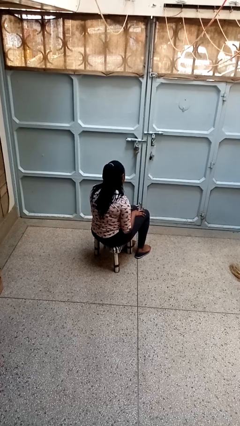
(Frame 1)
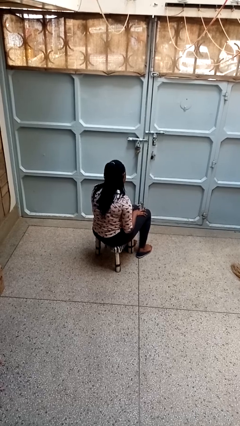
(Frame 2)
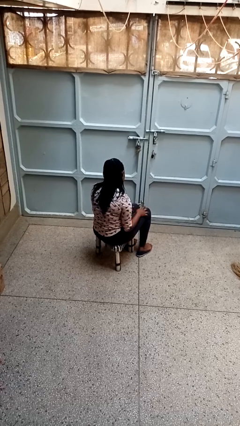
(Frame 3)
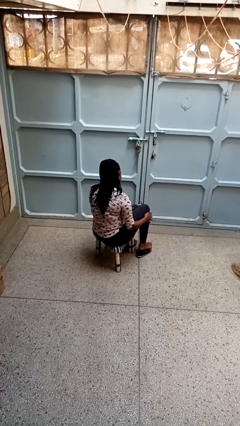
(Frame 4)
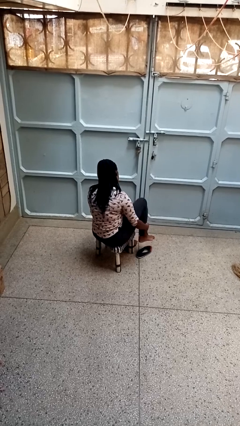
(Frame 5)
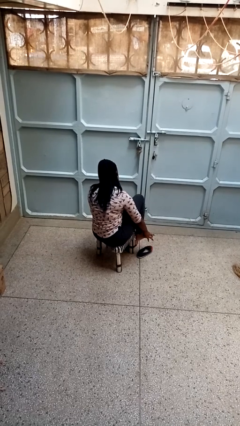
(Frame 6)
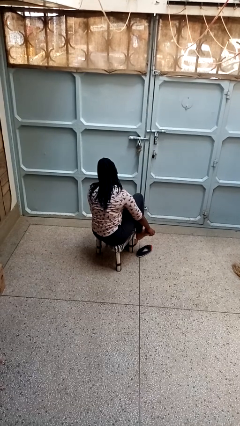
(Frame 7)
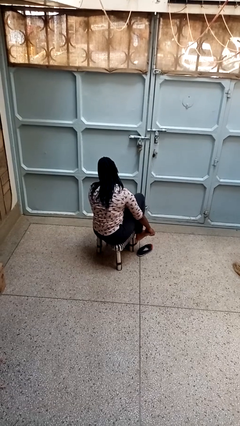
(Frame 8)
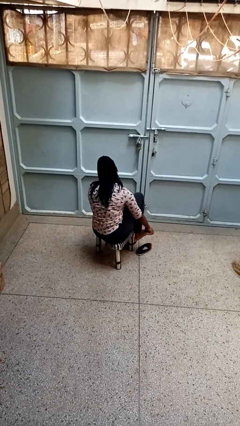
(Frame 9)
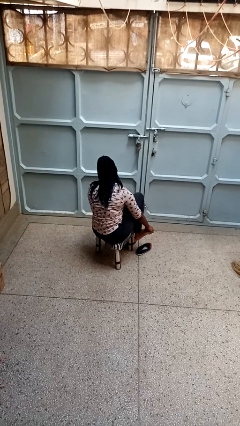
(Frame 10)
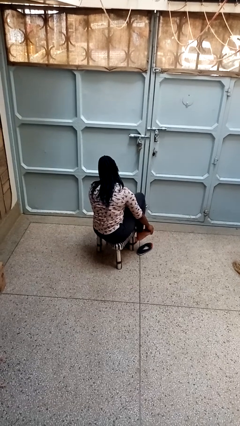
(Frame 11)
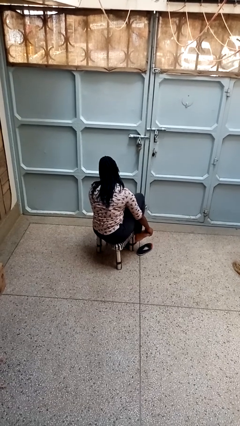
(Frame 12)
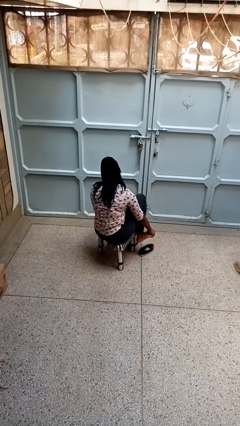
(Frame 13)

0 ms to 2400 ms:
person rubs foot

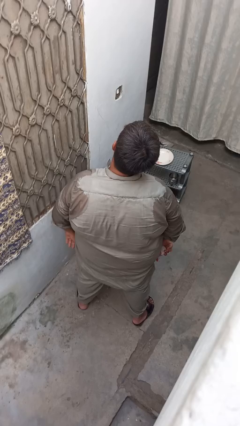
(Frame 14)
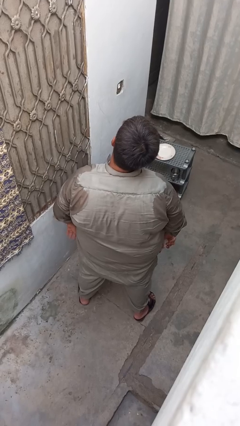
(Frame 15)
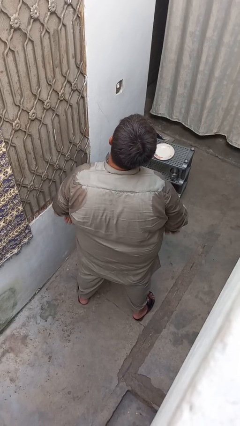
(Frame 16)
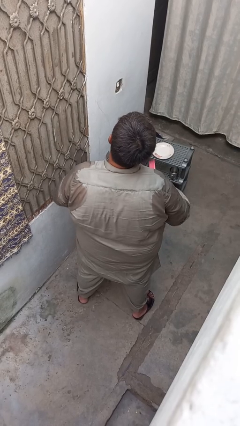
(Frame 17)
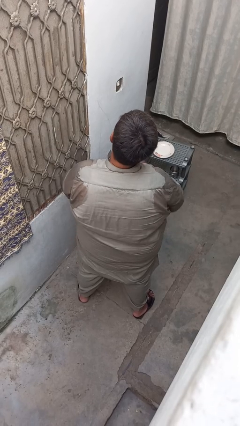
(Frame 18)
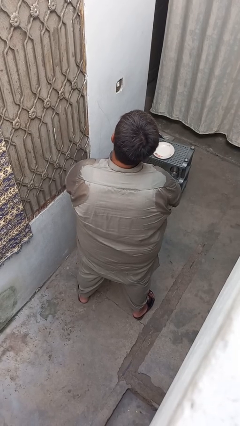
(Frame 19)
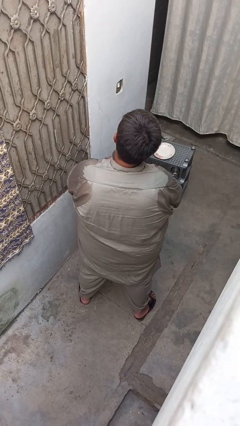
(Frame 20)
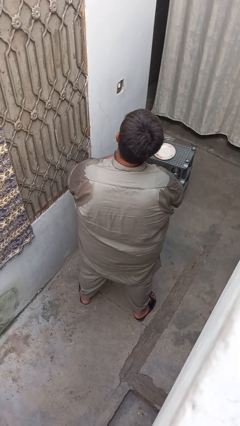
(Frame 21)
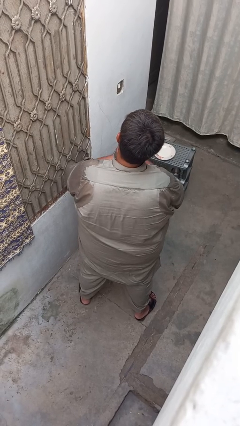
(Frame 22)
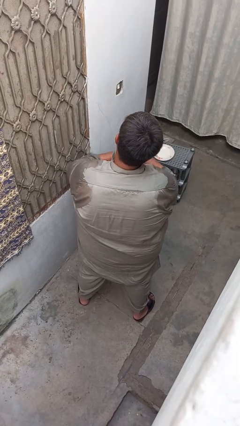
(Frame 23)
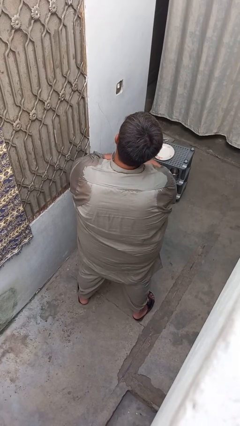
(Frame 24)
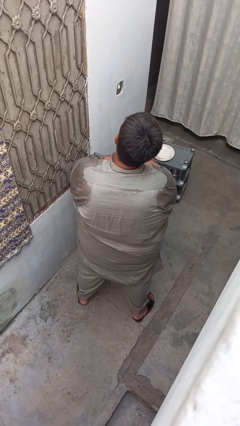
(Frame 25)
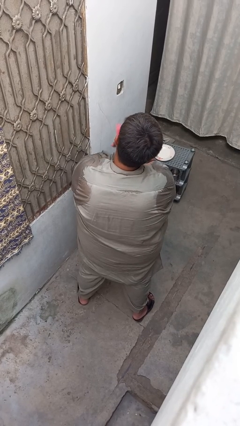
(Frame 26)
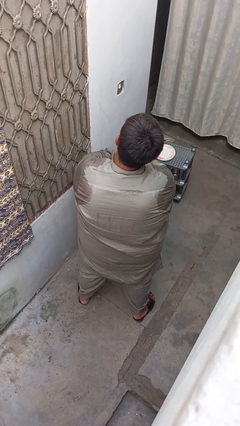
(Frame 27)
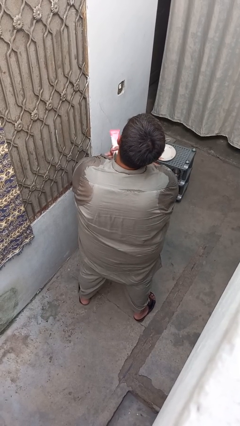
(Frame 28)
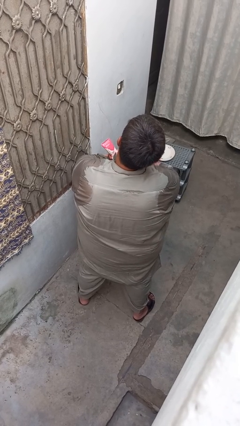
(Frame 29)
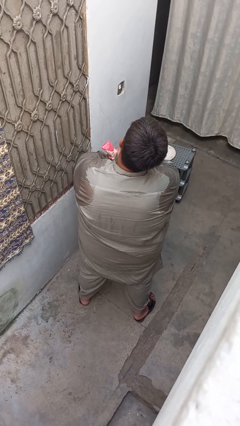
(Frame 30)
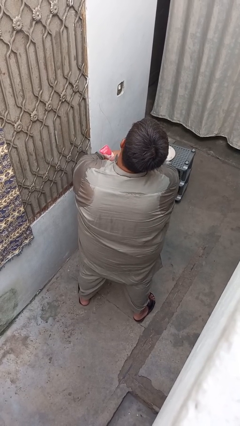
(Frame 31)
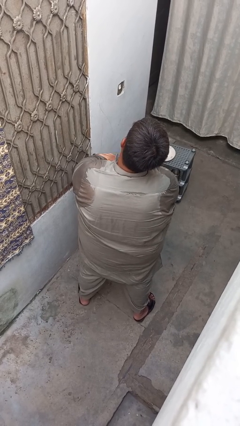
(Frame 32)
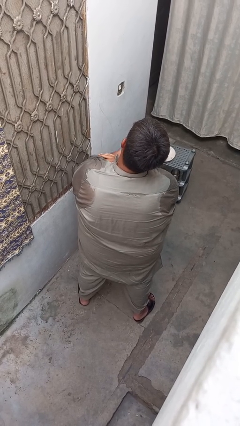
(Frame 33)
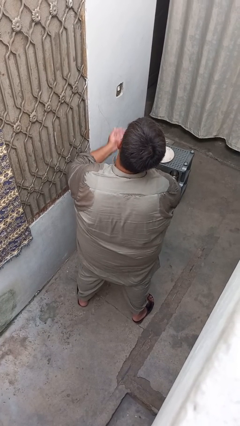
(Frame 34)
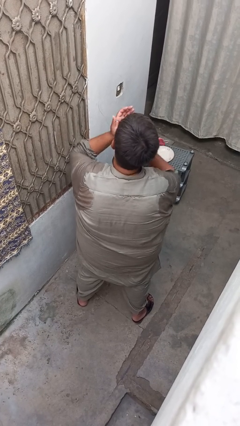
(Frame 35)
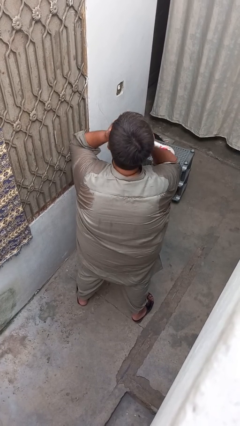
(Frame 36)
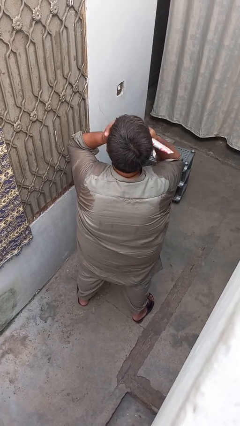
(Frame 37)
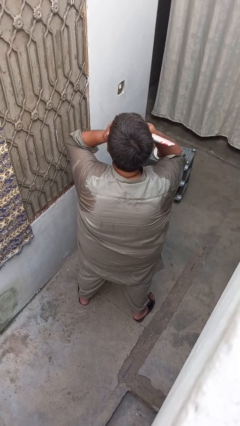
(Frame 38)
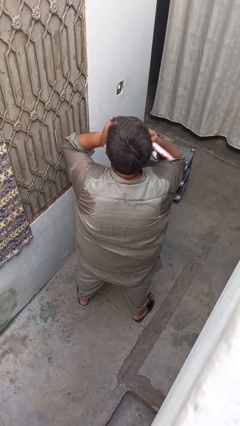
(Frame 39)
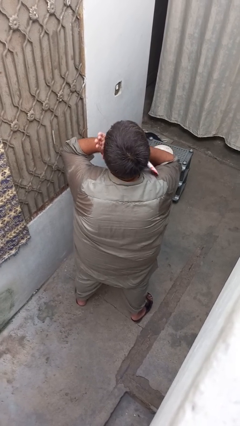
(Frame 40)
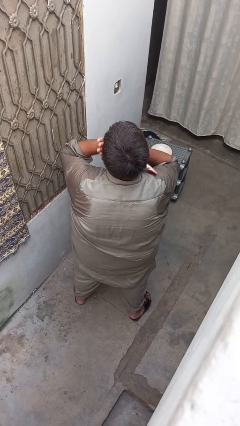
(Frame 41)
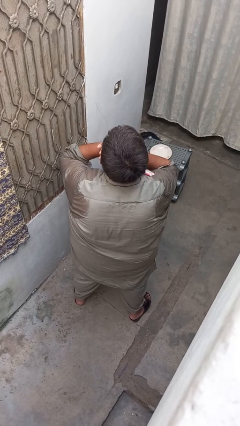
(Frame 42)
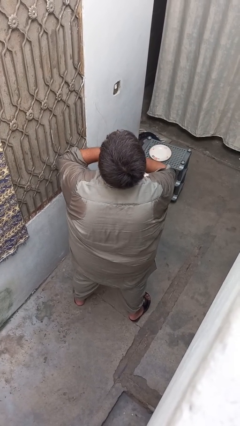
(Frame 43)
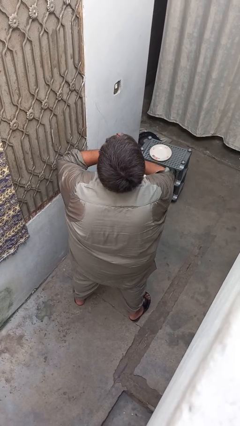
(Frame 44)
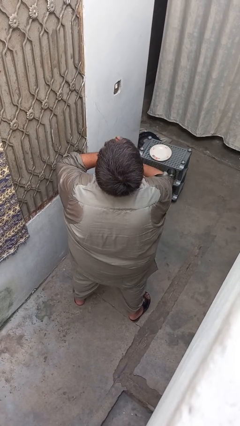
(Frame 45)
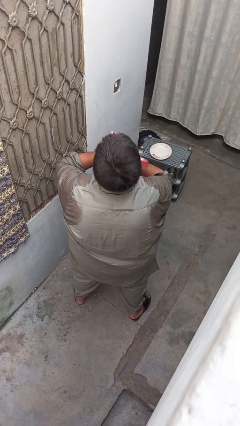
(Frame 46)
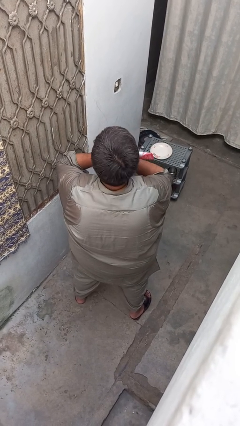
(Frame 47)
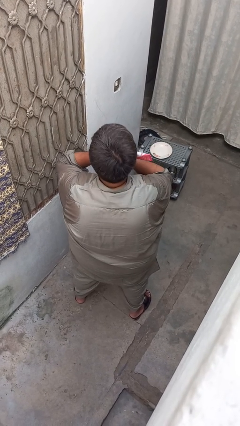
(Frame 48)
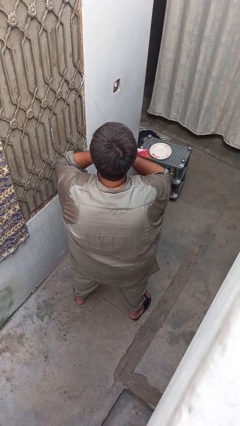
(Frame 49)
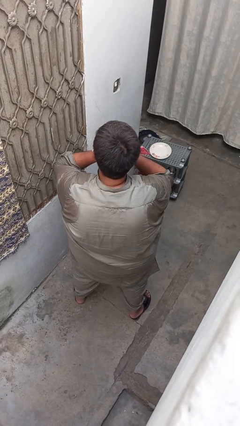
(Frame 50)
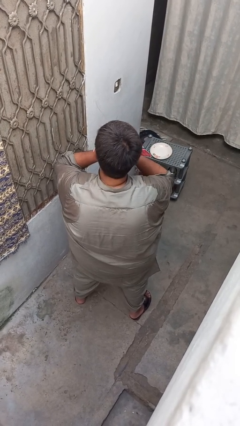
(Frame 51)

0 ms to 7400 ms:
person applies sunscreen

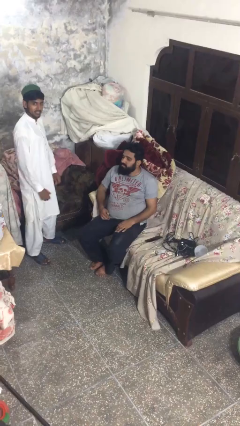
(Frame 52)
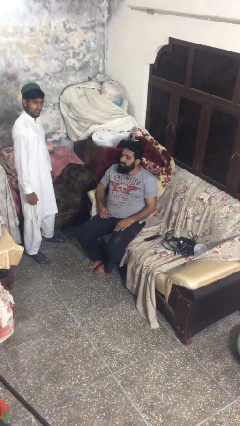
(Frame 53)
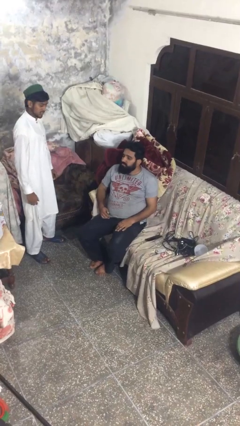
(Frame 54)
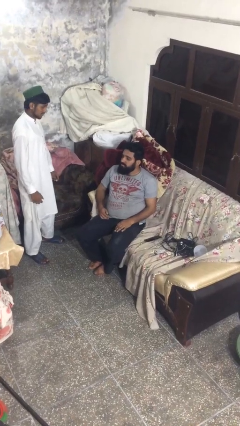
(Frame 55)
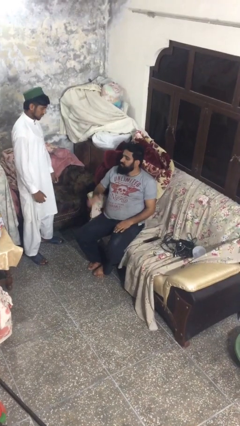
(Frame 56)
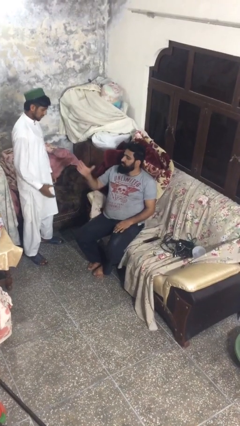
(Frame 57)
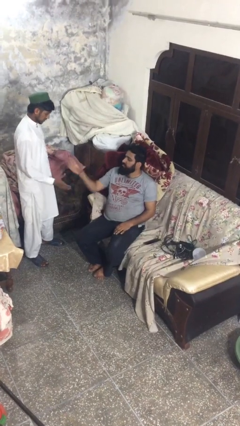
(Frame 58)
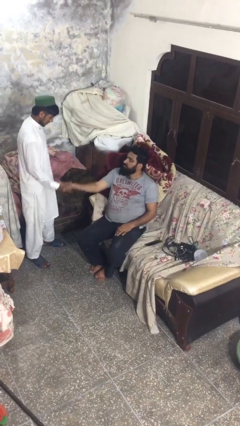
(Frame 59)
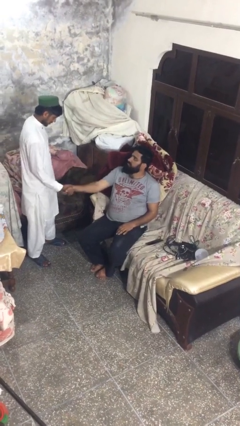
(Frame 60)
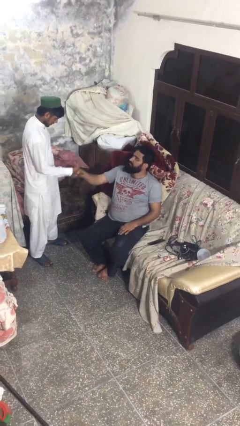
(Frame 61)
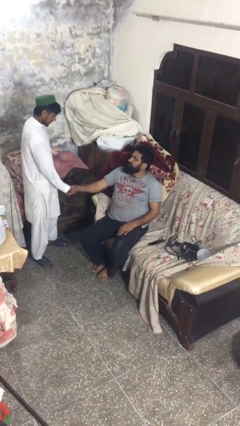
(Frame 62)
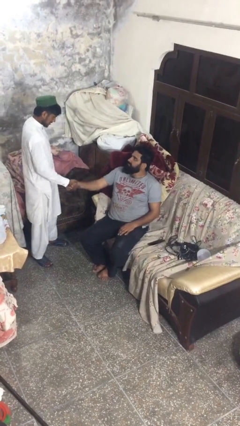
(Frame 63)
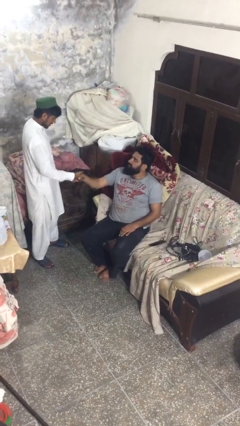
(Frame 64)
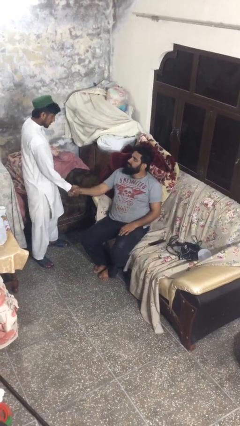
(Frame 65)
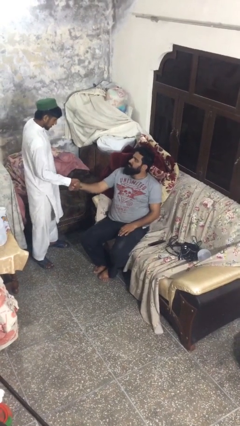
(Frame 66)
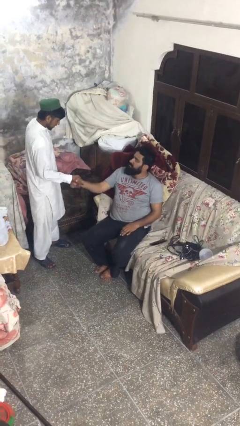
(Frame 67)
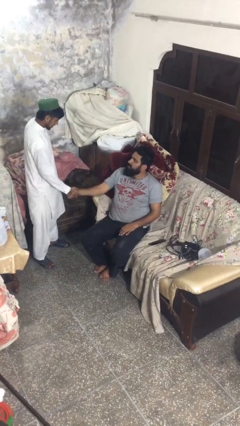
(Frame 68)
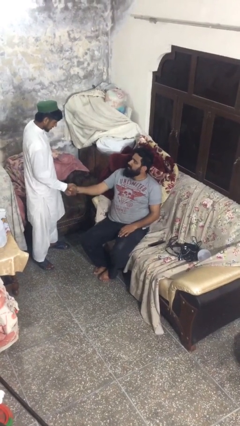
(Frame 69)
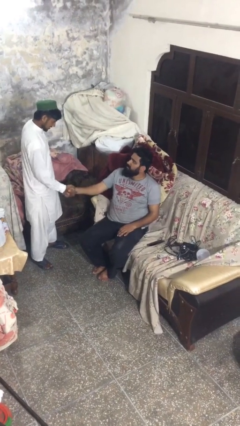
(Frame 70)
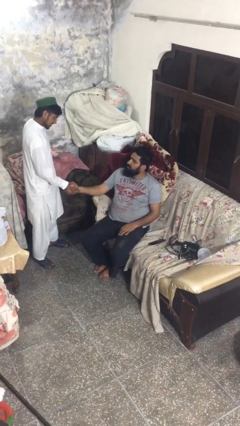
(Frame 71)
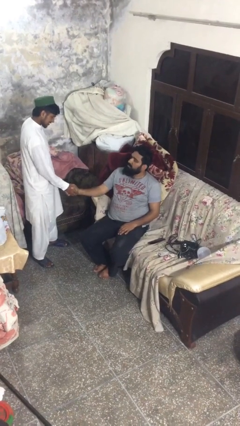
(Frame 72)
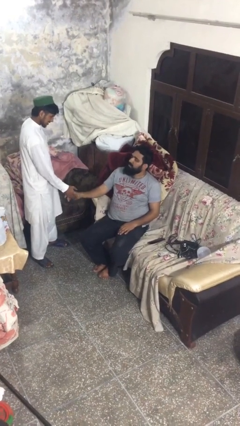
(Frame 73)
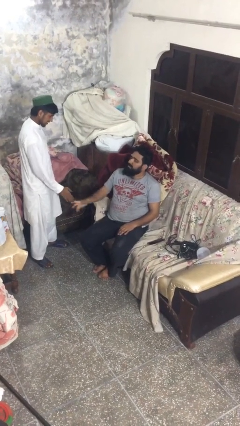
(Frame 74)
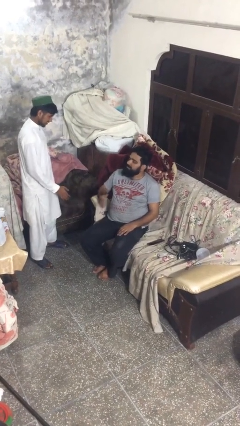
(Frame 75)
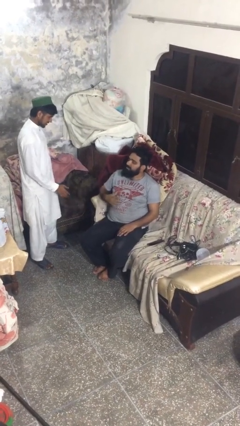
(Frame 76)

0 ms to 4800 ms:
person shakes hand

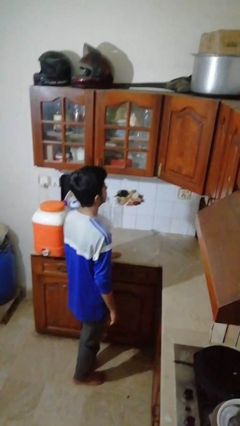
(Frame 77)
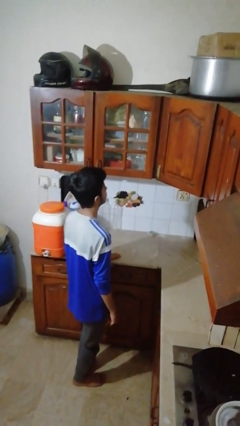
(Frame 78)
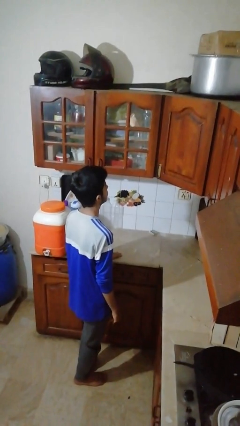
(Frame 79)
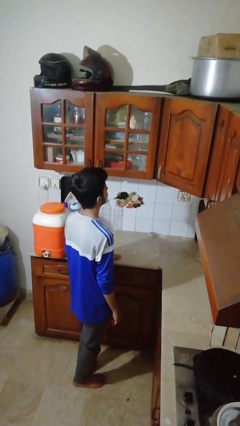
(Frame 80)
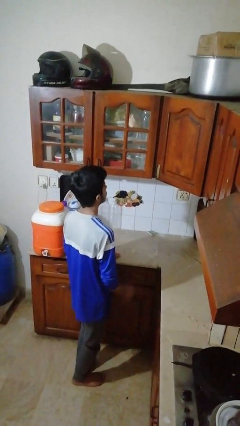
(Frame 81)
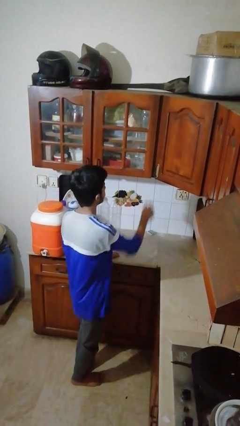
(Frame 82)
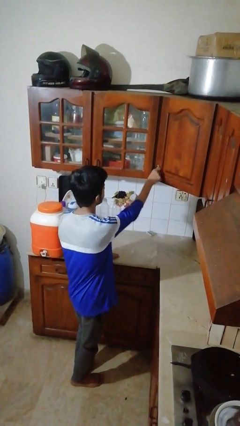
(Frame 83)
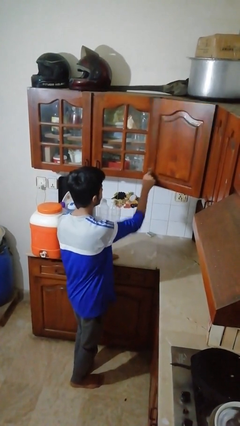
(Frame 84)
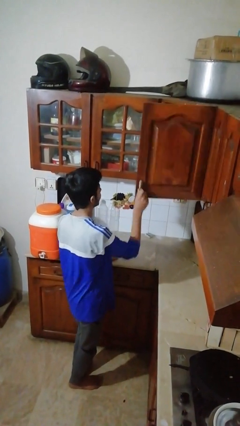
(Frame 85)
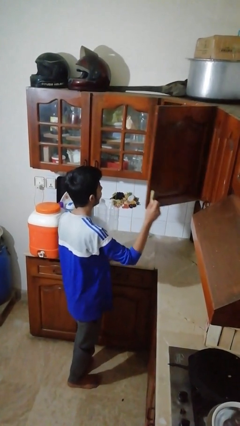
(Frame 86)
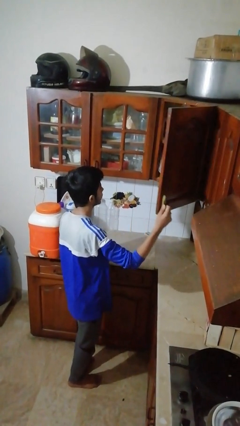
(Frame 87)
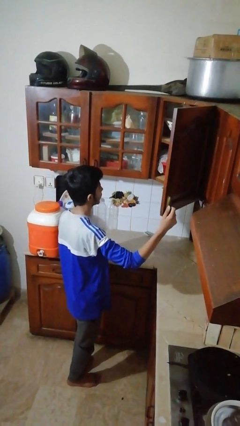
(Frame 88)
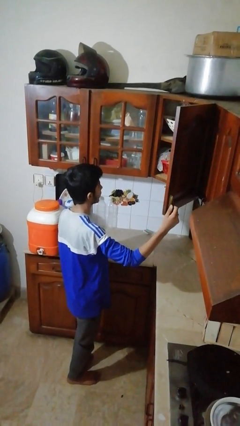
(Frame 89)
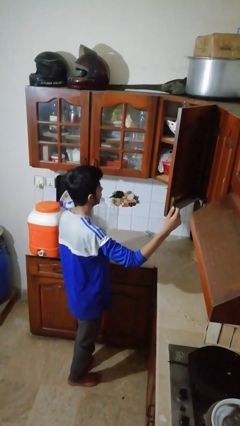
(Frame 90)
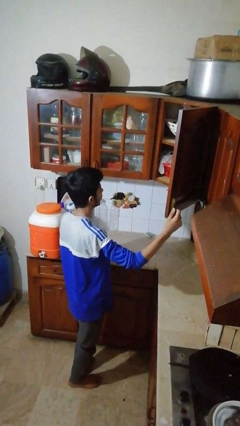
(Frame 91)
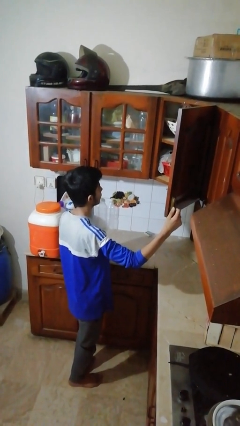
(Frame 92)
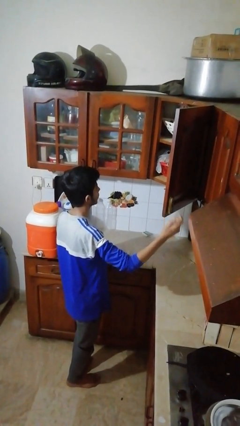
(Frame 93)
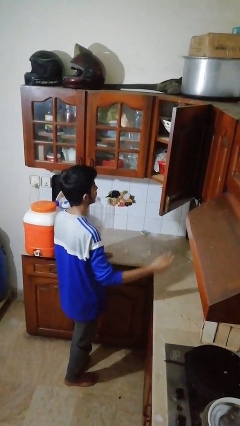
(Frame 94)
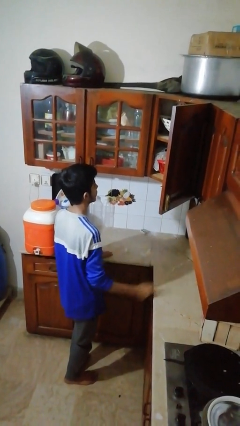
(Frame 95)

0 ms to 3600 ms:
person opens cabinet
